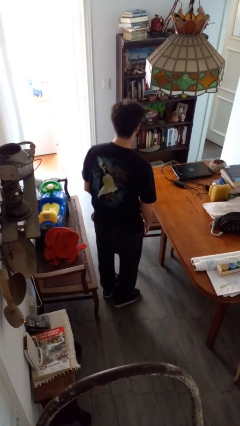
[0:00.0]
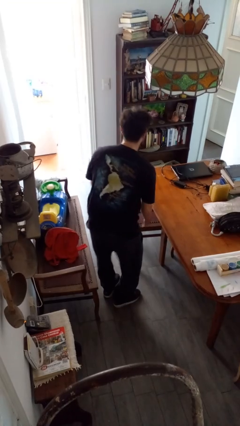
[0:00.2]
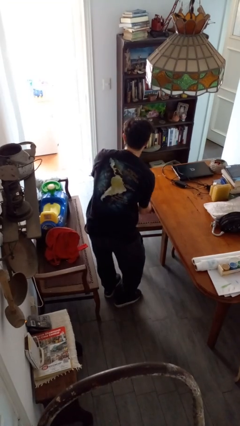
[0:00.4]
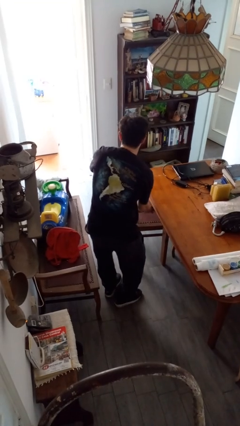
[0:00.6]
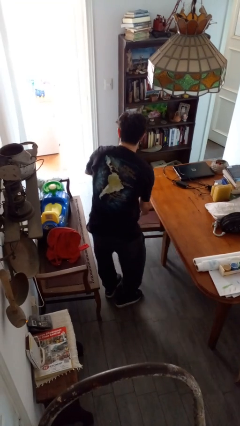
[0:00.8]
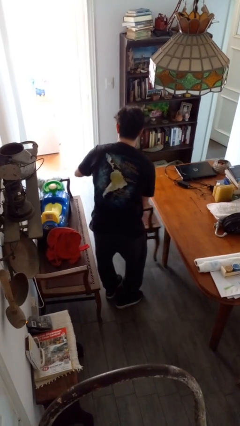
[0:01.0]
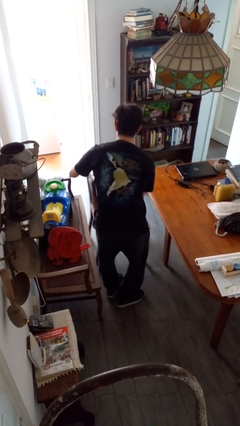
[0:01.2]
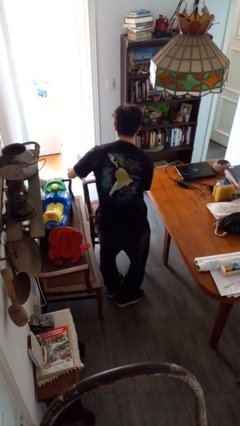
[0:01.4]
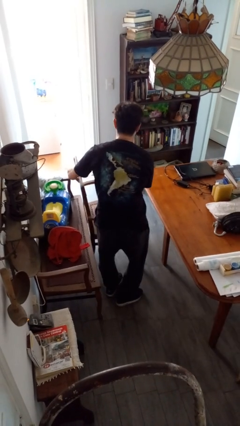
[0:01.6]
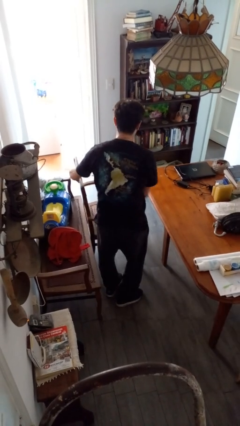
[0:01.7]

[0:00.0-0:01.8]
person pulls out chair

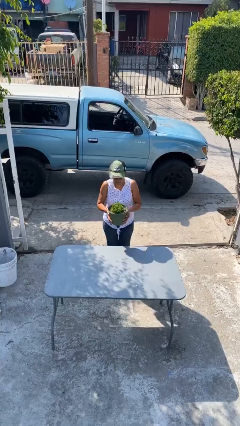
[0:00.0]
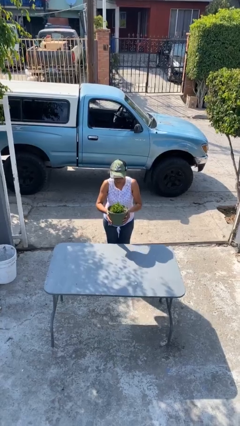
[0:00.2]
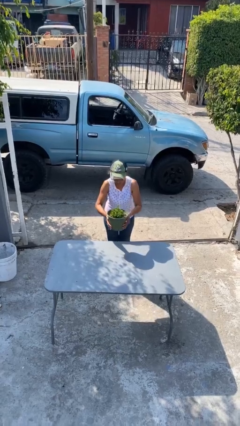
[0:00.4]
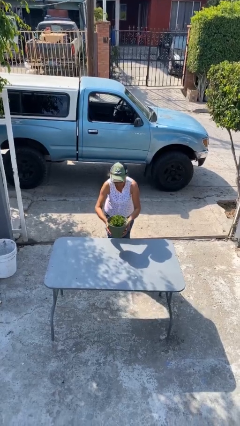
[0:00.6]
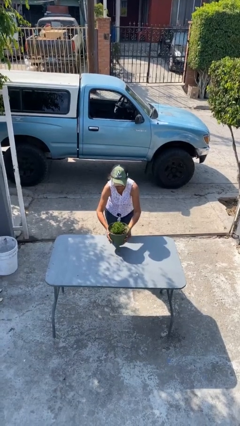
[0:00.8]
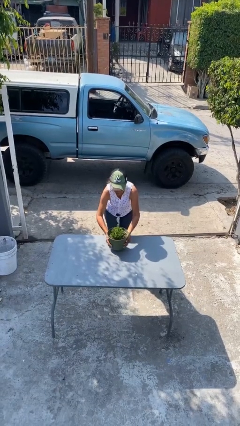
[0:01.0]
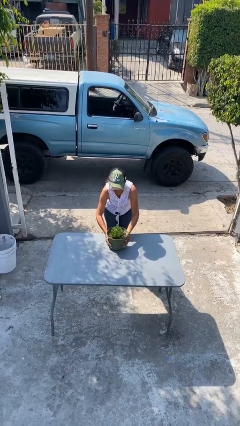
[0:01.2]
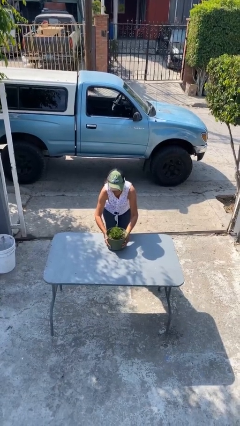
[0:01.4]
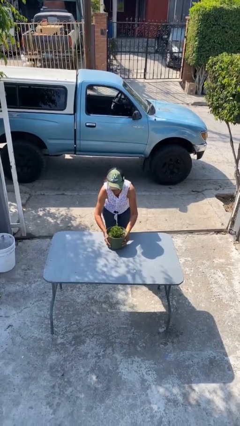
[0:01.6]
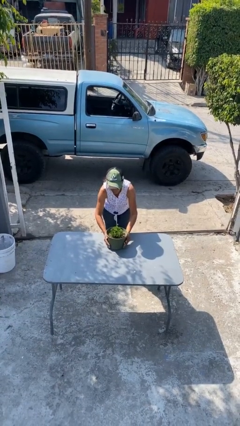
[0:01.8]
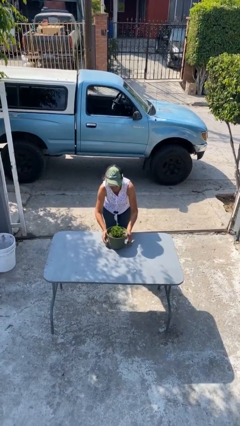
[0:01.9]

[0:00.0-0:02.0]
person puts down object on table

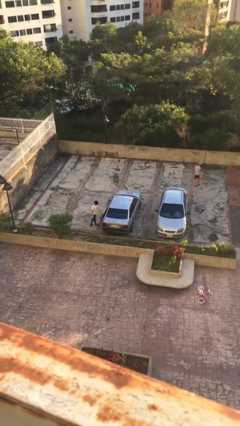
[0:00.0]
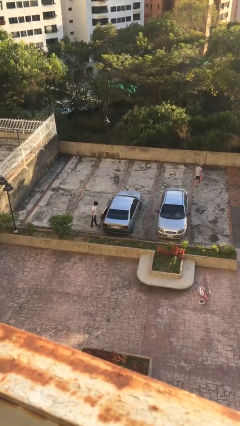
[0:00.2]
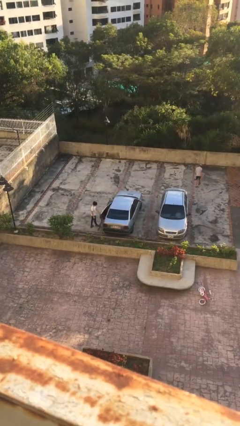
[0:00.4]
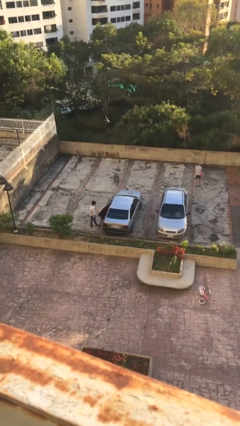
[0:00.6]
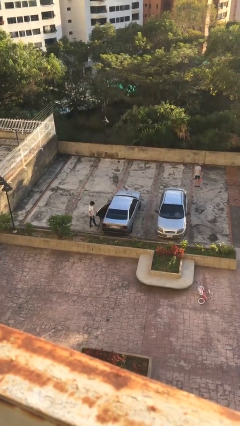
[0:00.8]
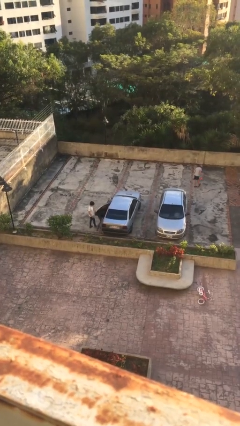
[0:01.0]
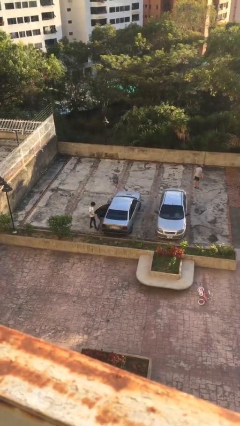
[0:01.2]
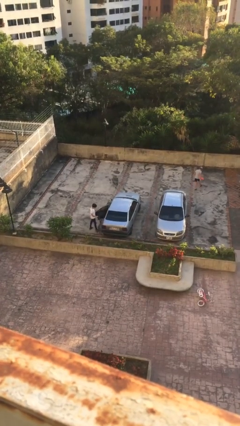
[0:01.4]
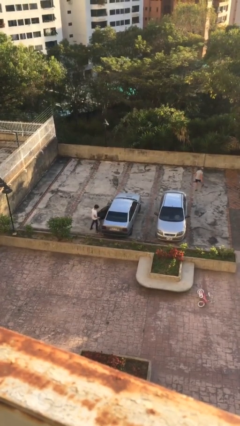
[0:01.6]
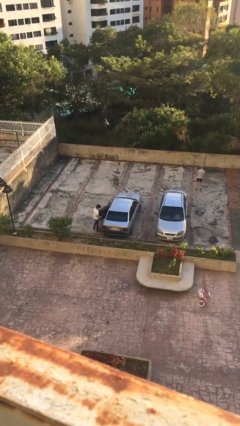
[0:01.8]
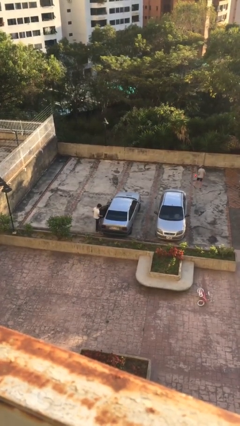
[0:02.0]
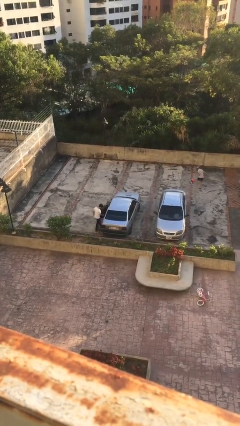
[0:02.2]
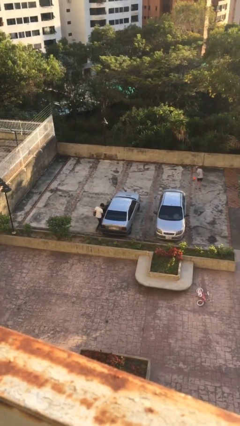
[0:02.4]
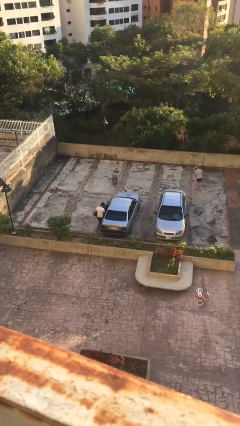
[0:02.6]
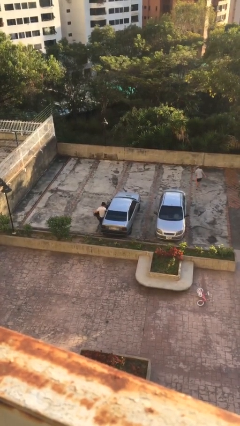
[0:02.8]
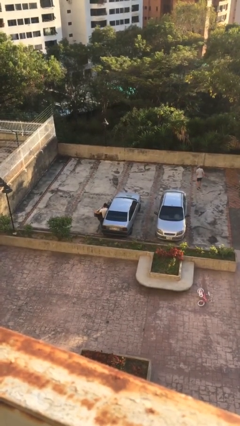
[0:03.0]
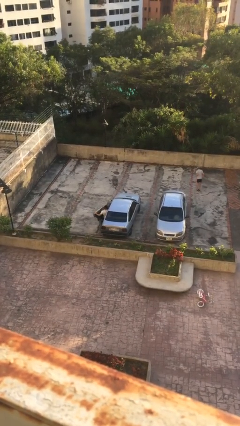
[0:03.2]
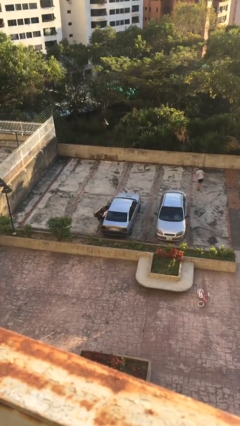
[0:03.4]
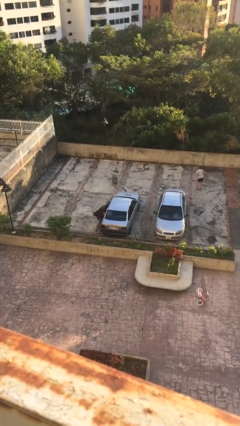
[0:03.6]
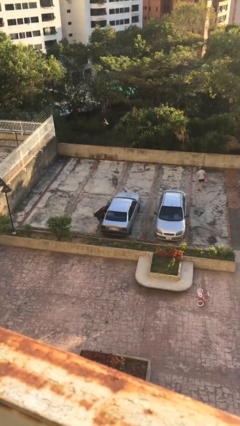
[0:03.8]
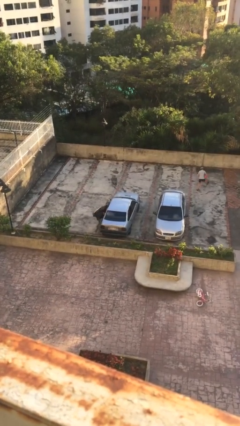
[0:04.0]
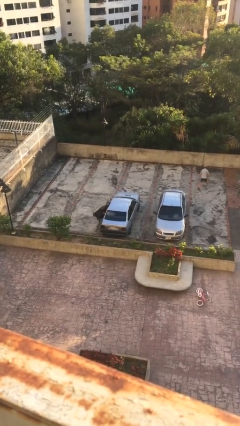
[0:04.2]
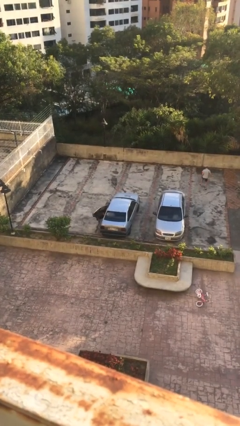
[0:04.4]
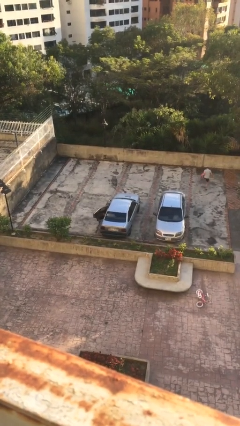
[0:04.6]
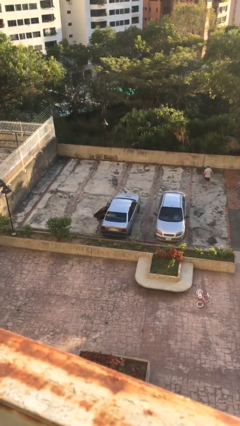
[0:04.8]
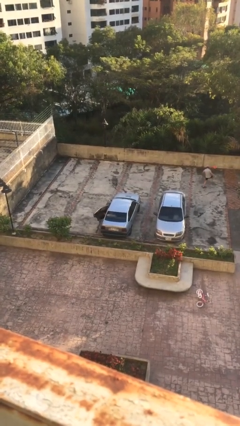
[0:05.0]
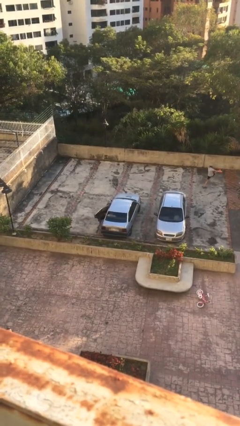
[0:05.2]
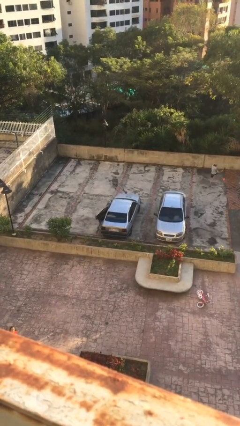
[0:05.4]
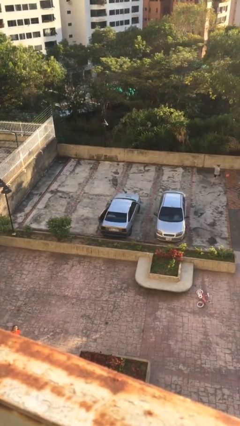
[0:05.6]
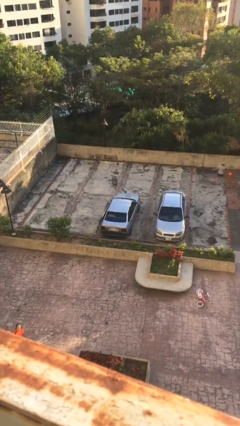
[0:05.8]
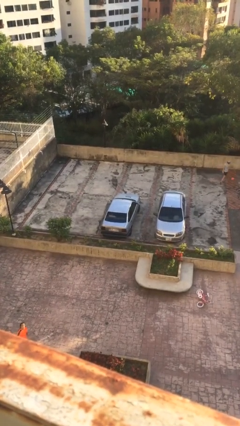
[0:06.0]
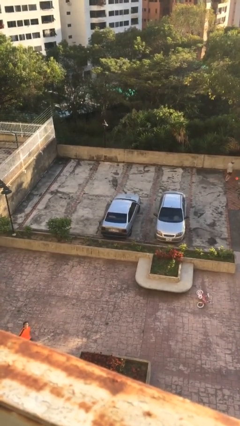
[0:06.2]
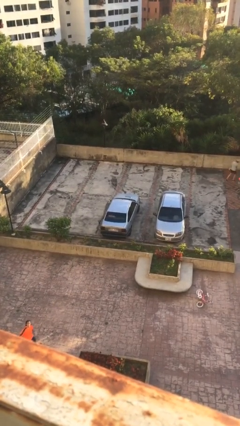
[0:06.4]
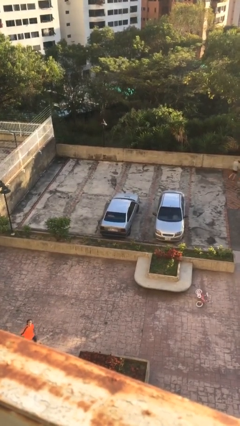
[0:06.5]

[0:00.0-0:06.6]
car picks up person

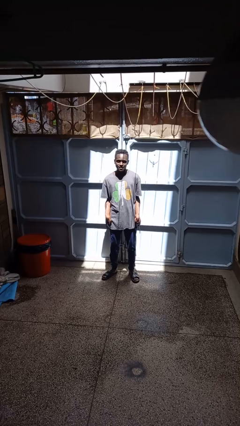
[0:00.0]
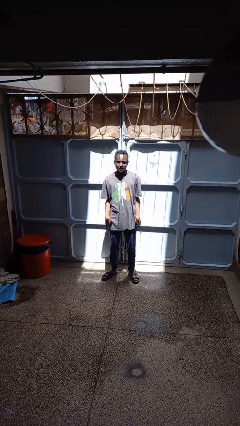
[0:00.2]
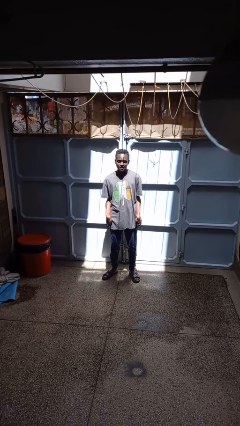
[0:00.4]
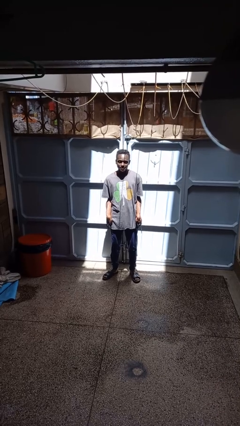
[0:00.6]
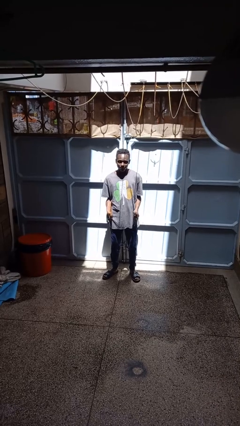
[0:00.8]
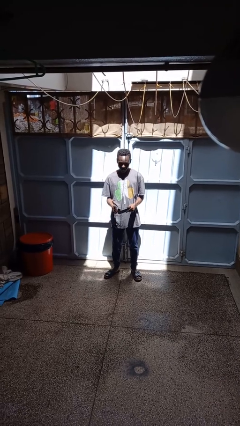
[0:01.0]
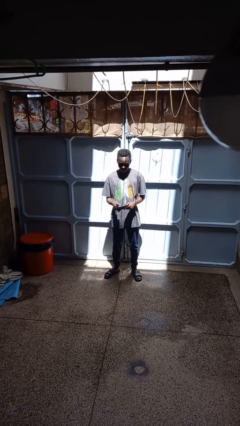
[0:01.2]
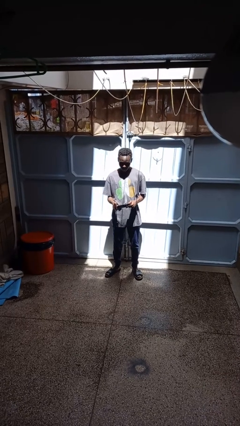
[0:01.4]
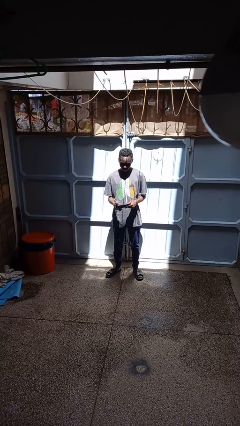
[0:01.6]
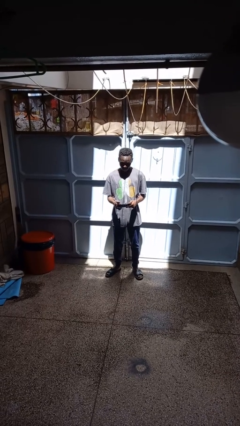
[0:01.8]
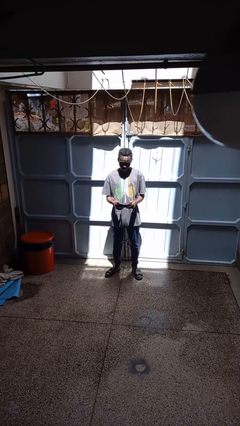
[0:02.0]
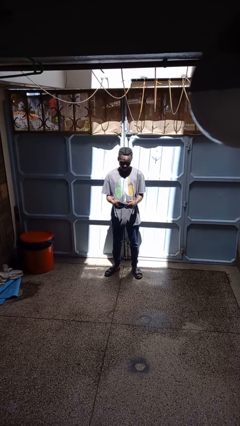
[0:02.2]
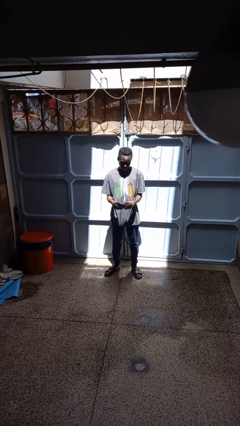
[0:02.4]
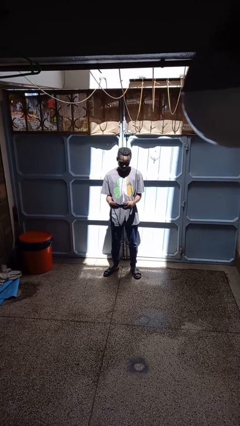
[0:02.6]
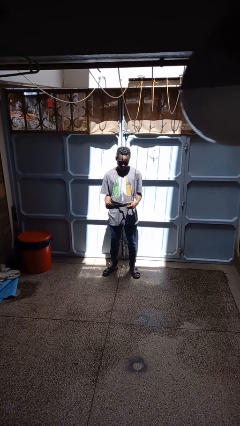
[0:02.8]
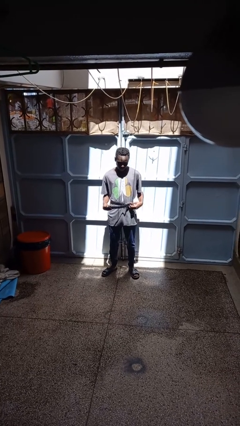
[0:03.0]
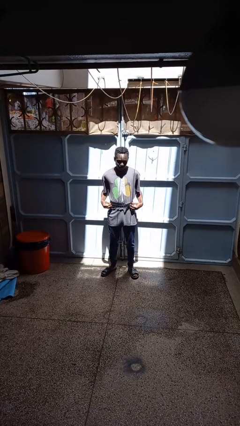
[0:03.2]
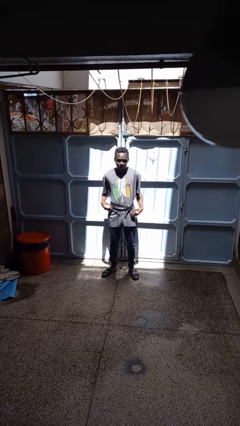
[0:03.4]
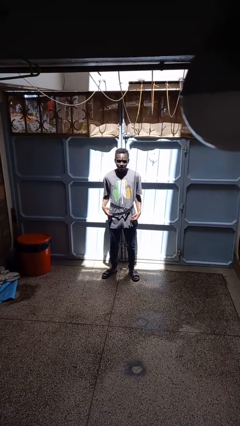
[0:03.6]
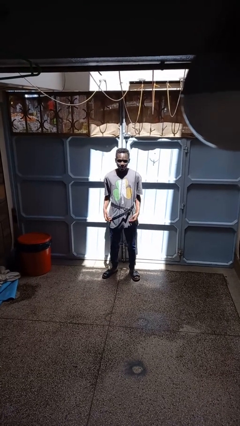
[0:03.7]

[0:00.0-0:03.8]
person puts on belt

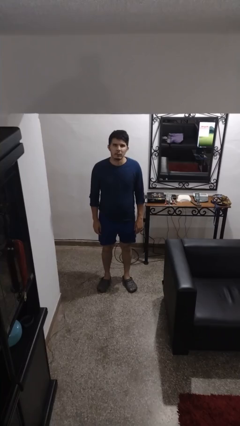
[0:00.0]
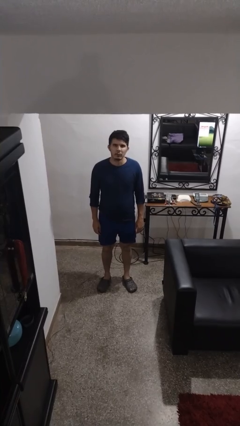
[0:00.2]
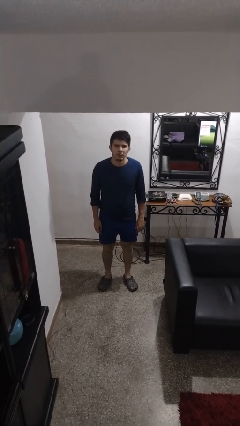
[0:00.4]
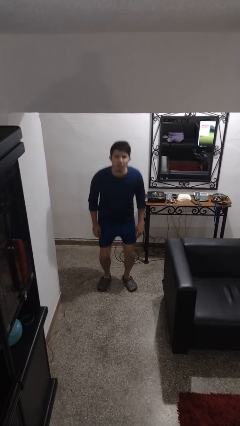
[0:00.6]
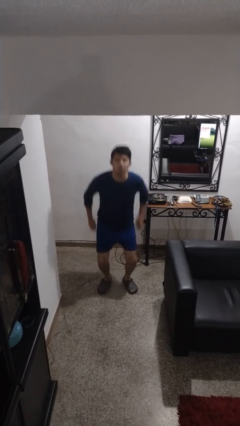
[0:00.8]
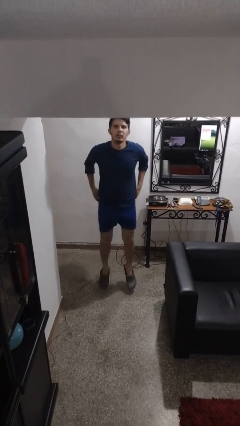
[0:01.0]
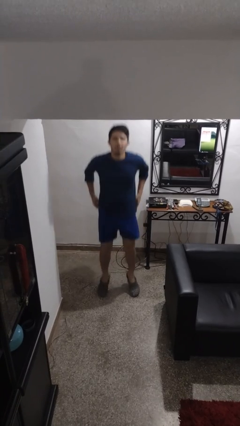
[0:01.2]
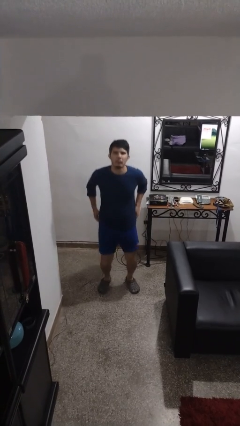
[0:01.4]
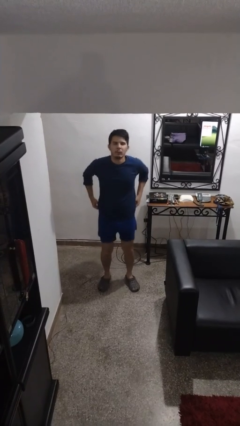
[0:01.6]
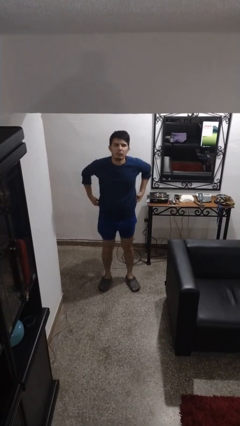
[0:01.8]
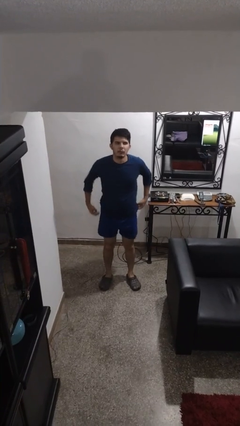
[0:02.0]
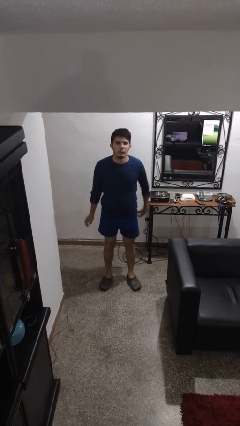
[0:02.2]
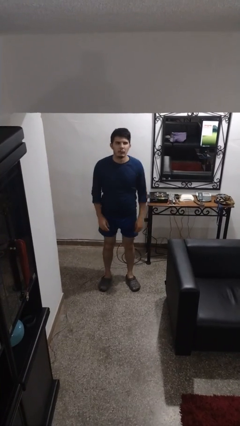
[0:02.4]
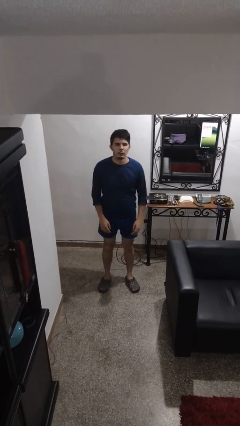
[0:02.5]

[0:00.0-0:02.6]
person jumps

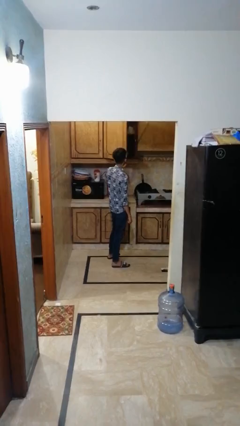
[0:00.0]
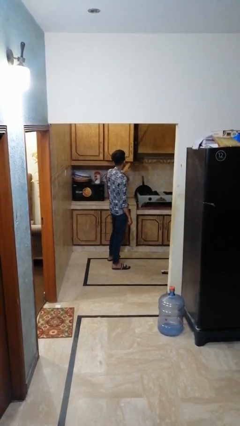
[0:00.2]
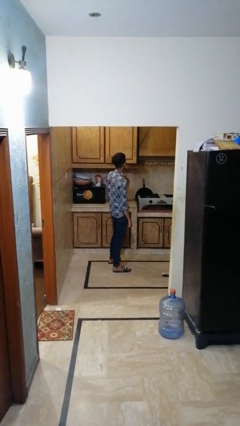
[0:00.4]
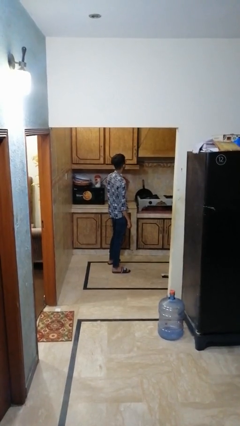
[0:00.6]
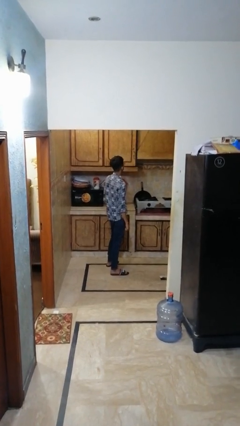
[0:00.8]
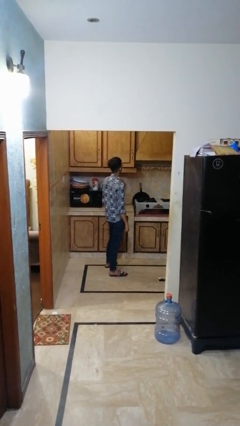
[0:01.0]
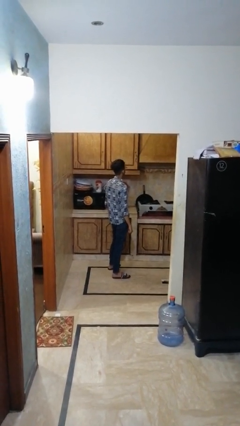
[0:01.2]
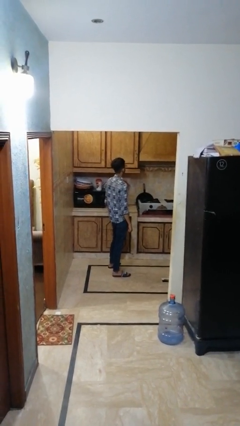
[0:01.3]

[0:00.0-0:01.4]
person closes cabinet
